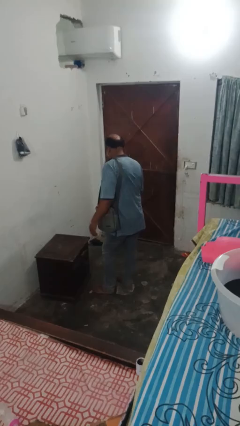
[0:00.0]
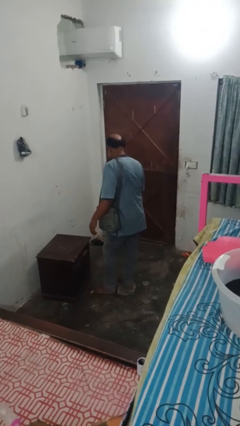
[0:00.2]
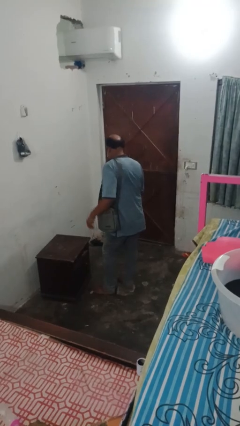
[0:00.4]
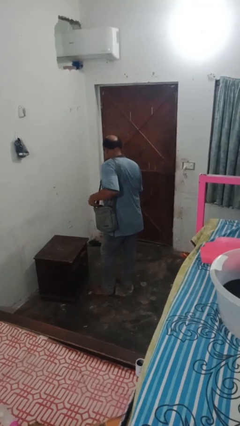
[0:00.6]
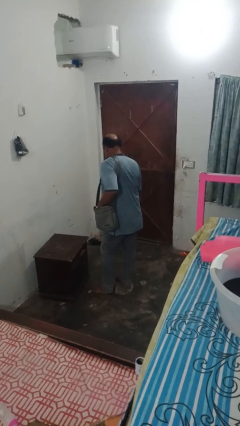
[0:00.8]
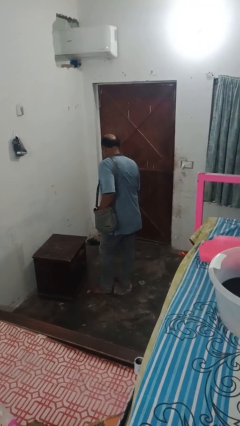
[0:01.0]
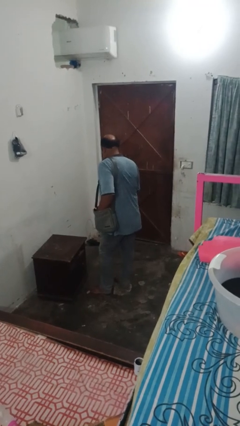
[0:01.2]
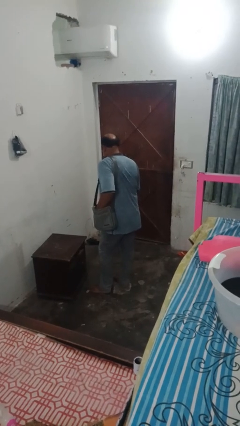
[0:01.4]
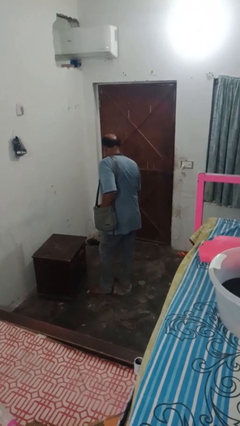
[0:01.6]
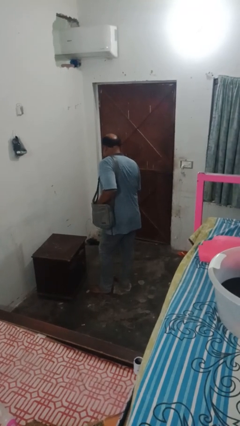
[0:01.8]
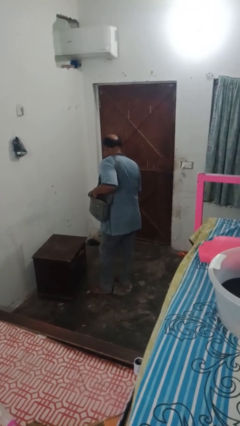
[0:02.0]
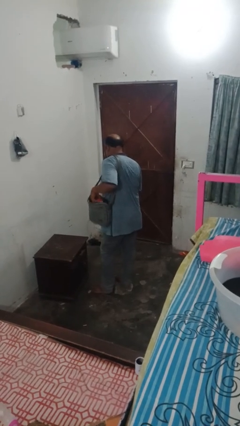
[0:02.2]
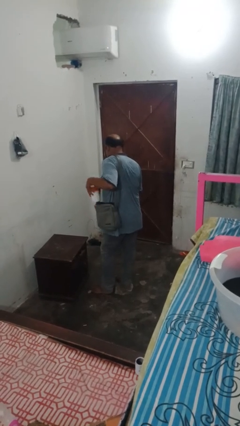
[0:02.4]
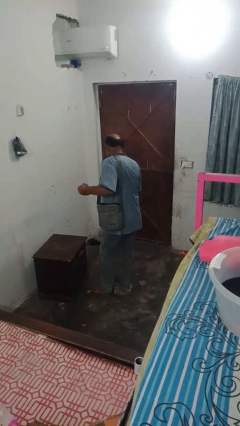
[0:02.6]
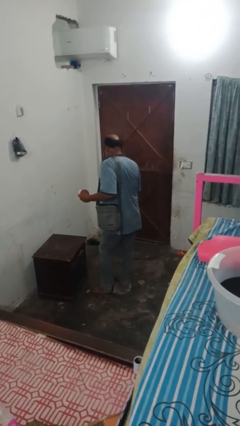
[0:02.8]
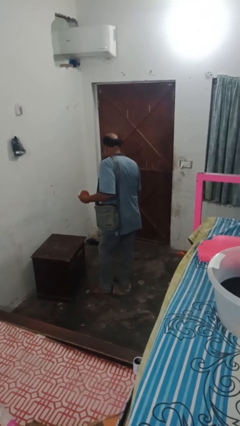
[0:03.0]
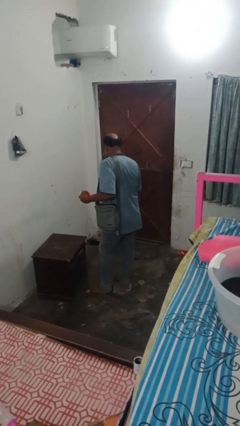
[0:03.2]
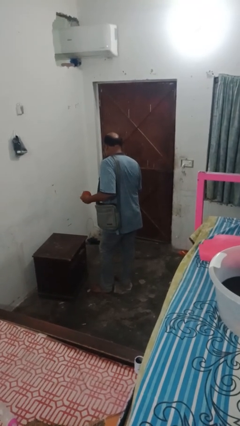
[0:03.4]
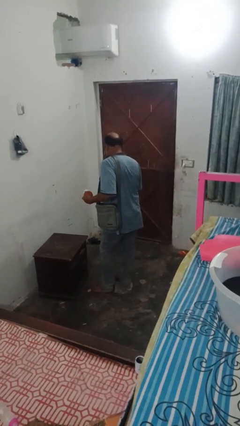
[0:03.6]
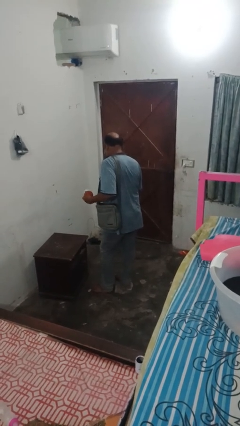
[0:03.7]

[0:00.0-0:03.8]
person takes object from bag

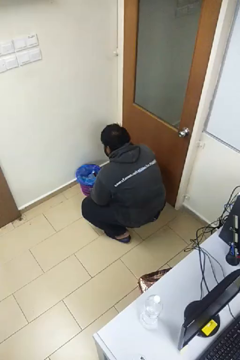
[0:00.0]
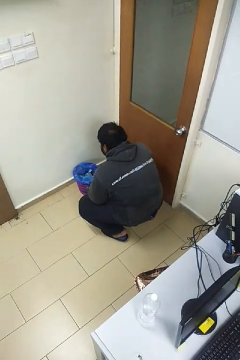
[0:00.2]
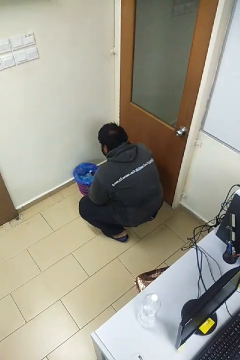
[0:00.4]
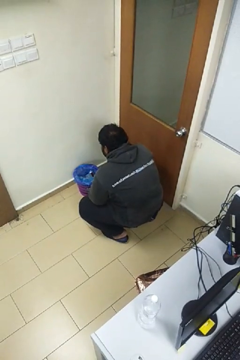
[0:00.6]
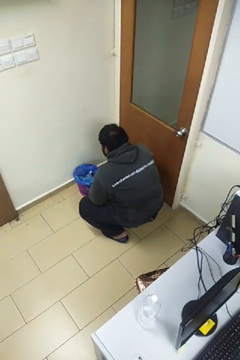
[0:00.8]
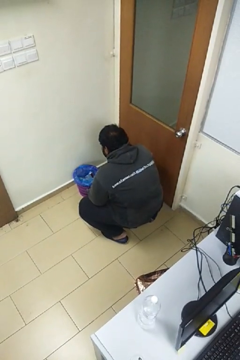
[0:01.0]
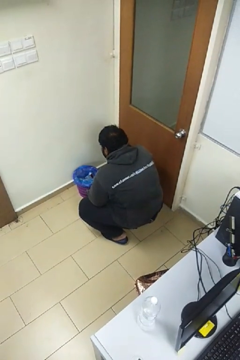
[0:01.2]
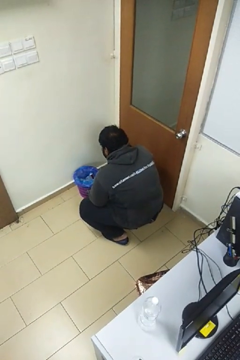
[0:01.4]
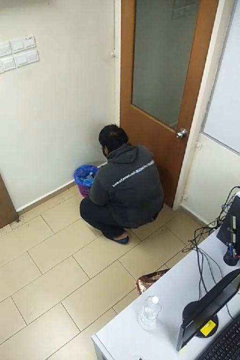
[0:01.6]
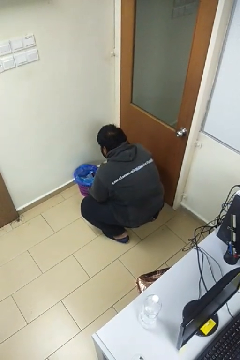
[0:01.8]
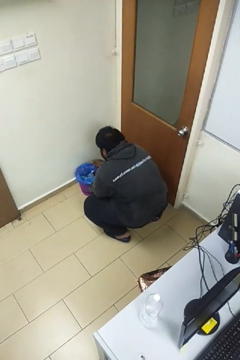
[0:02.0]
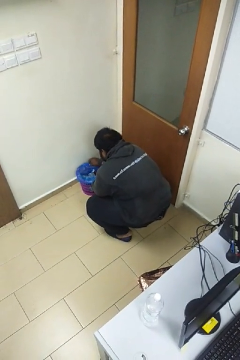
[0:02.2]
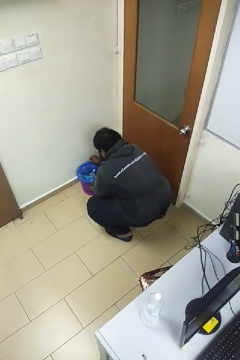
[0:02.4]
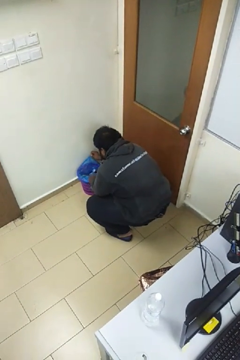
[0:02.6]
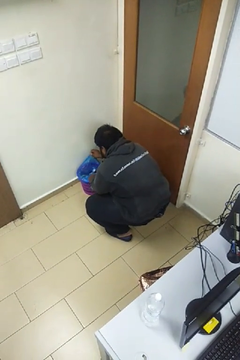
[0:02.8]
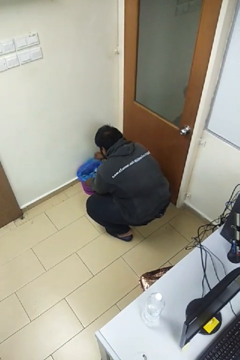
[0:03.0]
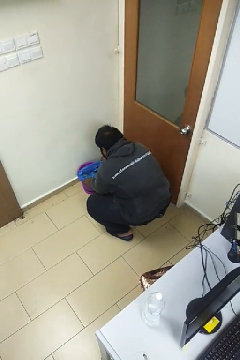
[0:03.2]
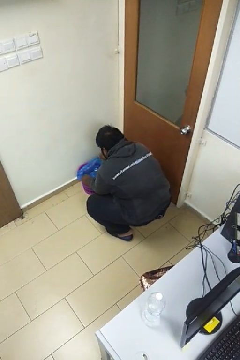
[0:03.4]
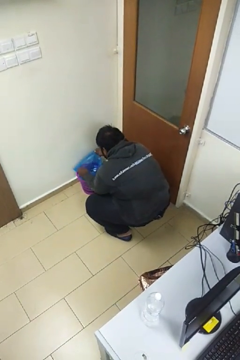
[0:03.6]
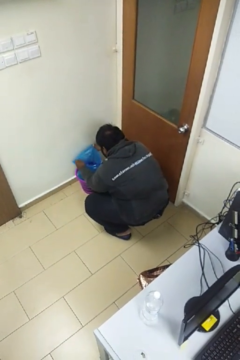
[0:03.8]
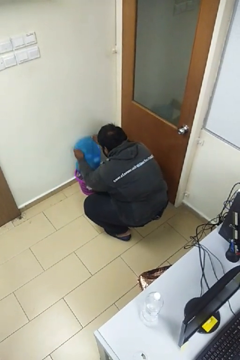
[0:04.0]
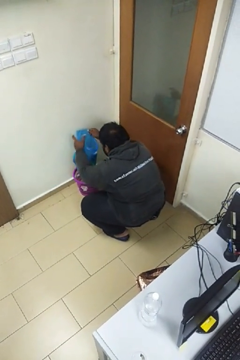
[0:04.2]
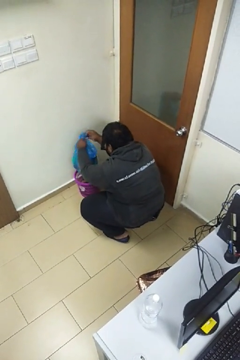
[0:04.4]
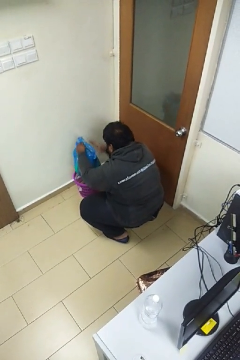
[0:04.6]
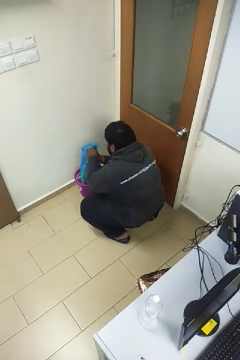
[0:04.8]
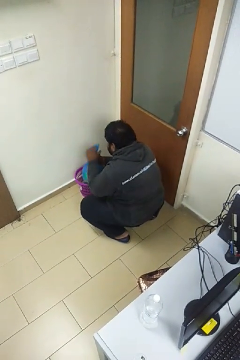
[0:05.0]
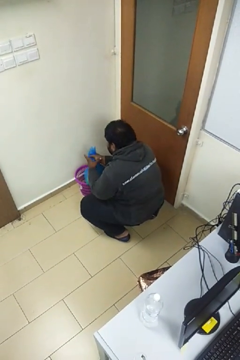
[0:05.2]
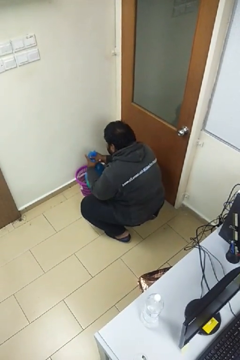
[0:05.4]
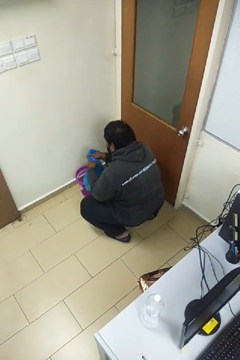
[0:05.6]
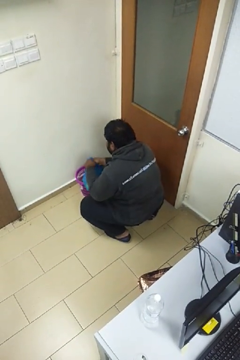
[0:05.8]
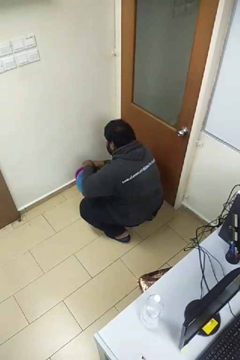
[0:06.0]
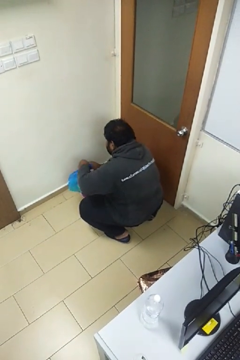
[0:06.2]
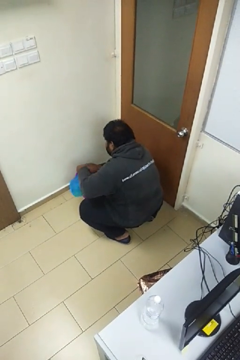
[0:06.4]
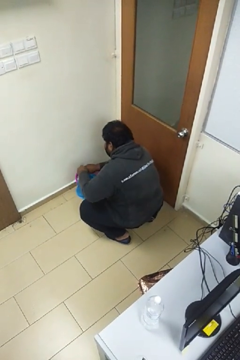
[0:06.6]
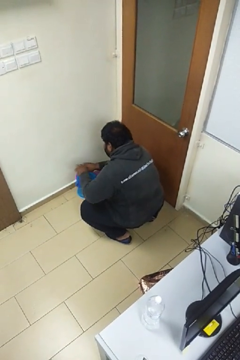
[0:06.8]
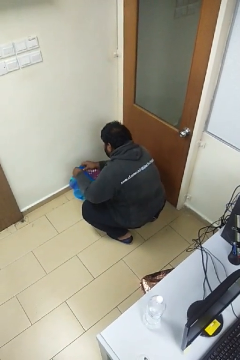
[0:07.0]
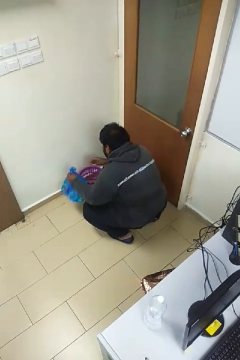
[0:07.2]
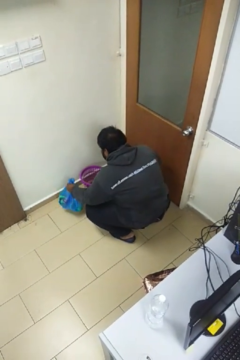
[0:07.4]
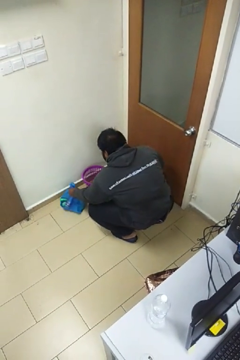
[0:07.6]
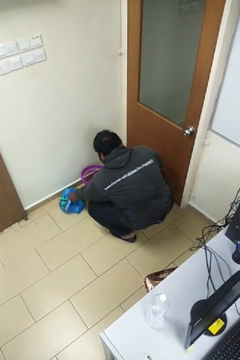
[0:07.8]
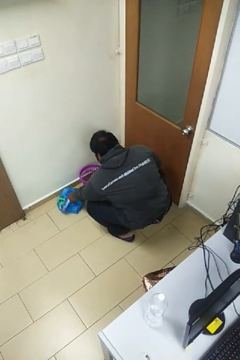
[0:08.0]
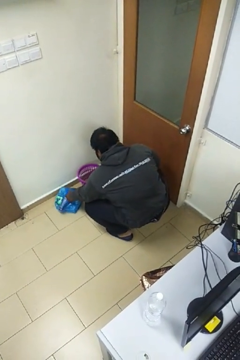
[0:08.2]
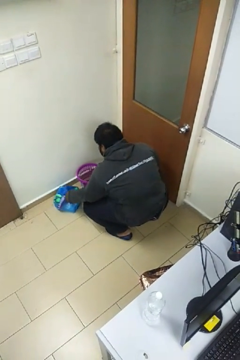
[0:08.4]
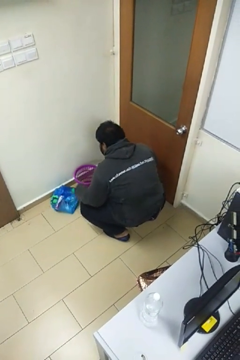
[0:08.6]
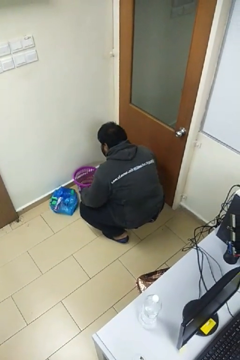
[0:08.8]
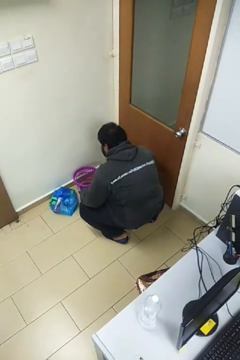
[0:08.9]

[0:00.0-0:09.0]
person removes trashbag from trashcan

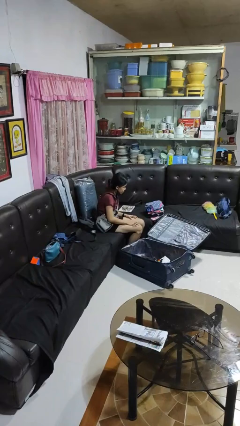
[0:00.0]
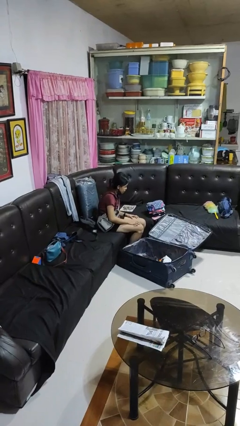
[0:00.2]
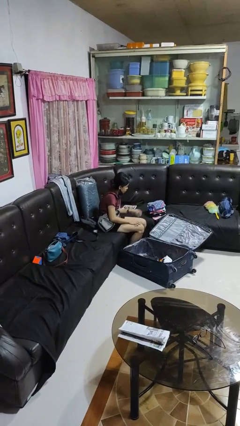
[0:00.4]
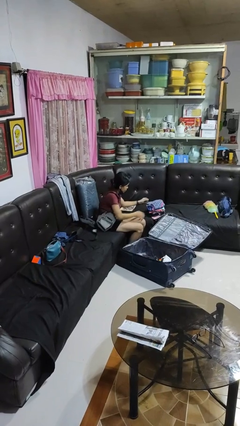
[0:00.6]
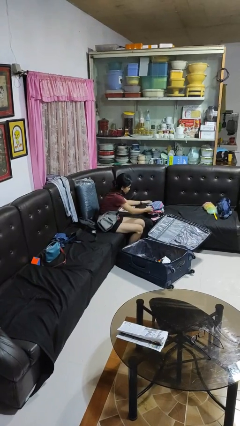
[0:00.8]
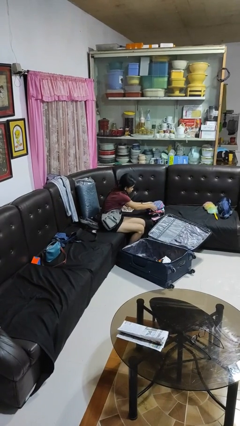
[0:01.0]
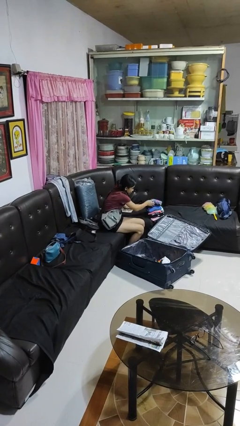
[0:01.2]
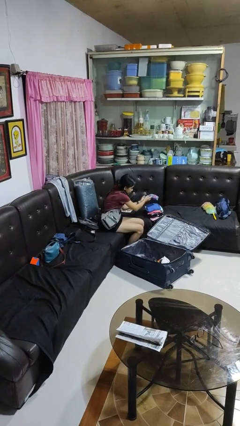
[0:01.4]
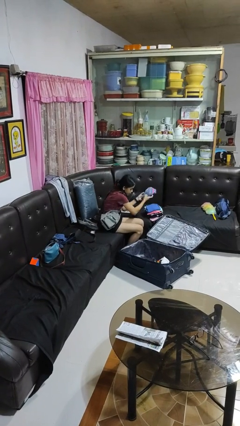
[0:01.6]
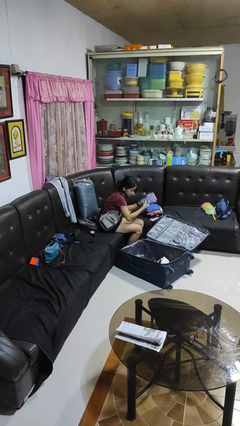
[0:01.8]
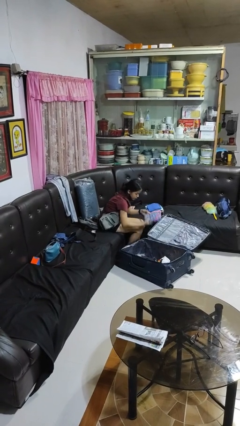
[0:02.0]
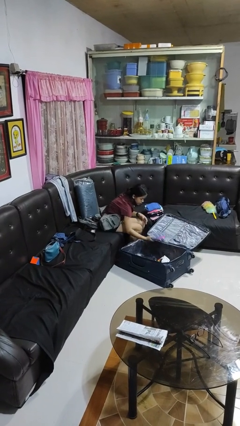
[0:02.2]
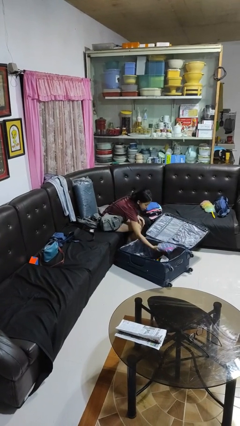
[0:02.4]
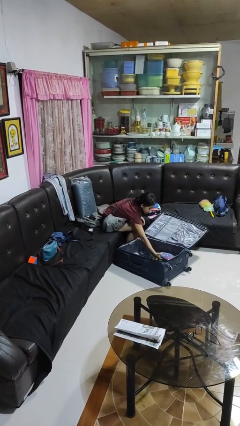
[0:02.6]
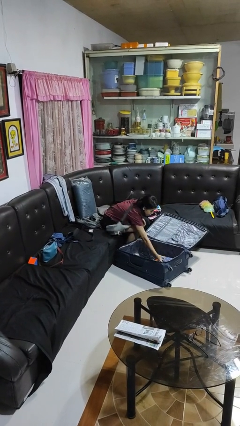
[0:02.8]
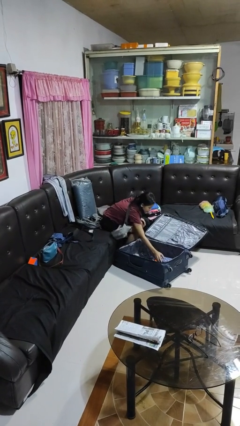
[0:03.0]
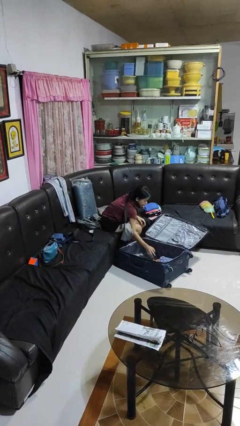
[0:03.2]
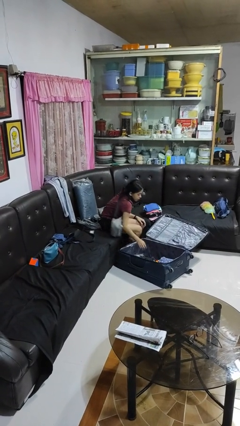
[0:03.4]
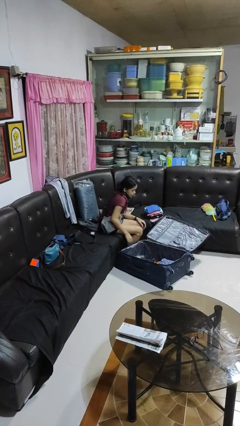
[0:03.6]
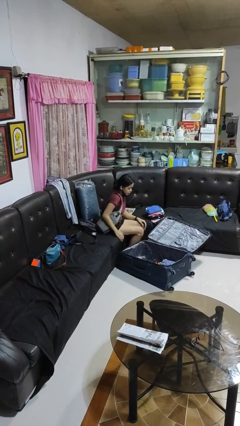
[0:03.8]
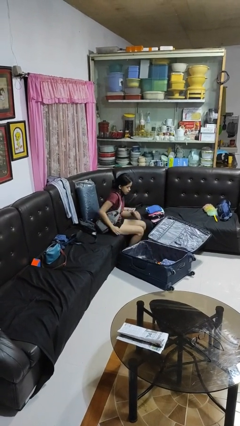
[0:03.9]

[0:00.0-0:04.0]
person loads clothes into suitcase

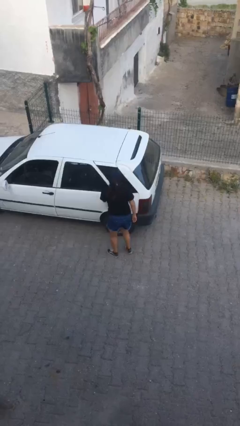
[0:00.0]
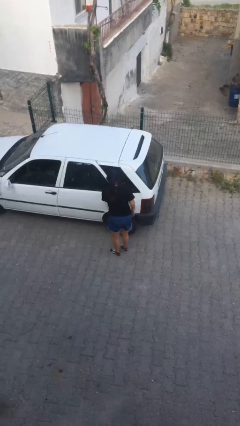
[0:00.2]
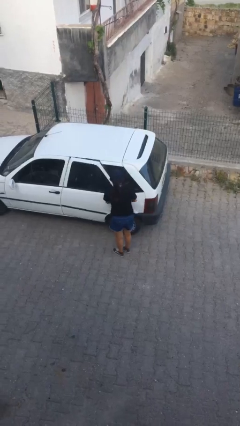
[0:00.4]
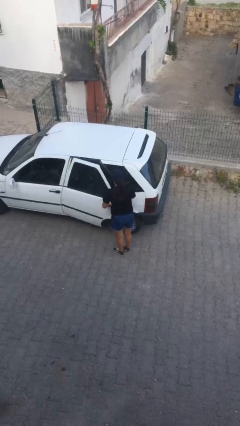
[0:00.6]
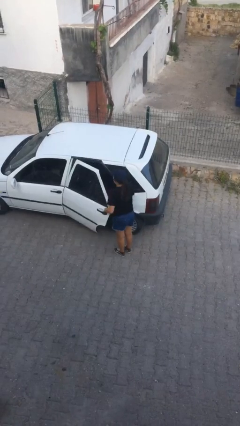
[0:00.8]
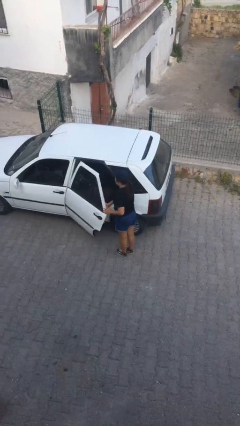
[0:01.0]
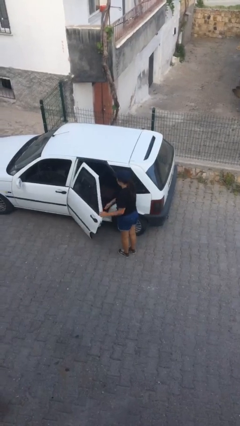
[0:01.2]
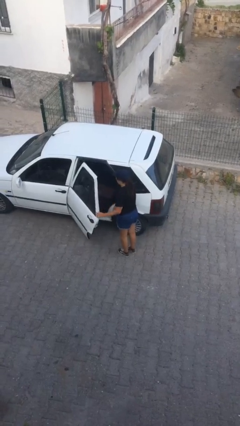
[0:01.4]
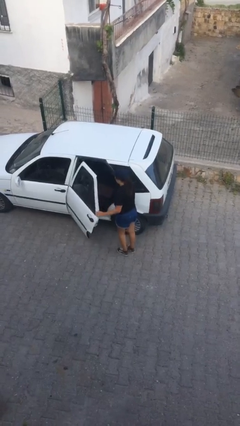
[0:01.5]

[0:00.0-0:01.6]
person opens car door

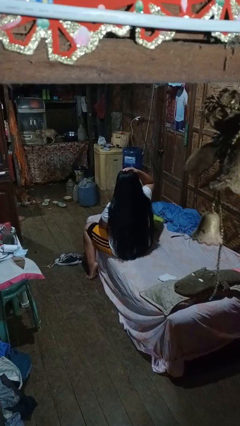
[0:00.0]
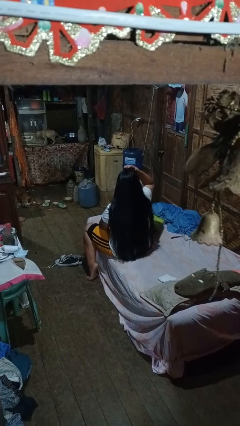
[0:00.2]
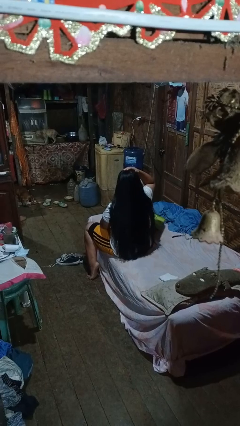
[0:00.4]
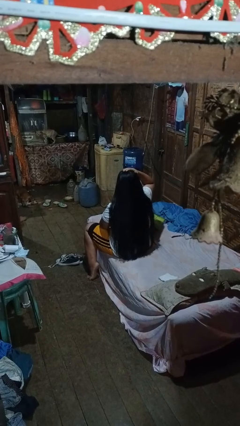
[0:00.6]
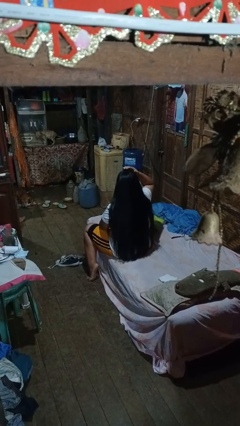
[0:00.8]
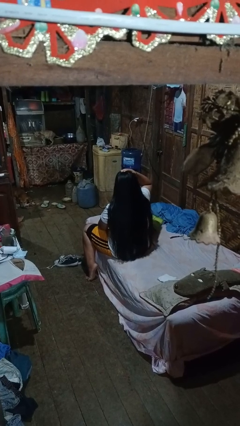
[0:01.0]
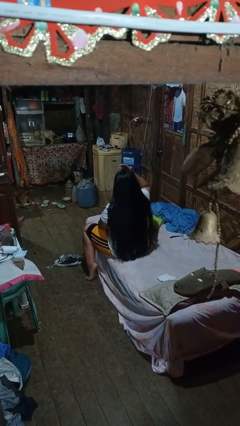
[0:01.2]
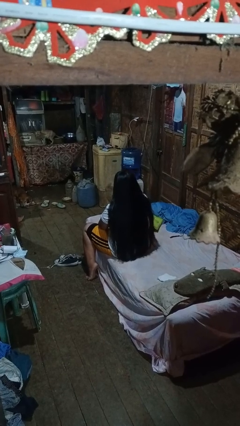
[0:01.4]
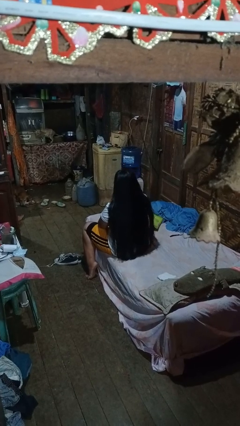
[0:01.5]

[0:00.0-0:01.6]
person pats head
